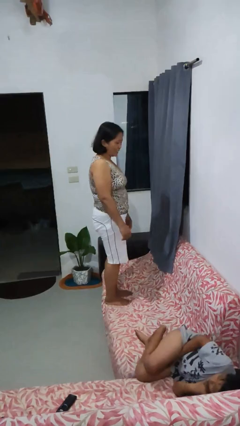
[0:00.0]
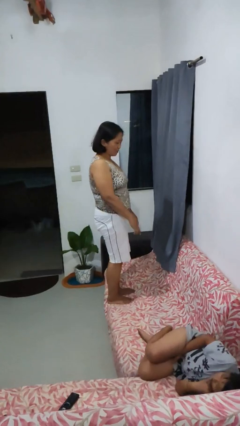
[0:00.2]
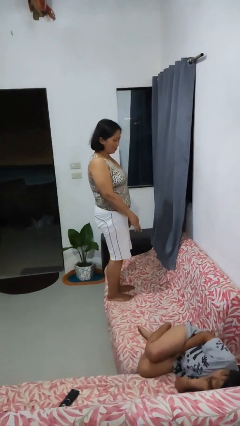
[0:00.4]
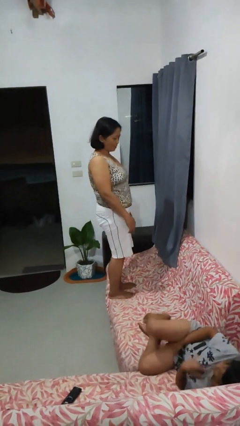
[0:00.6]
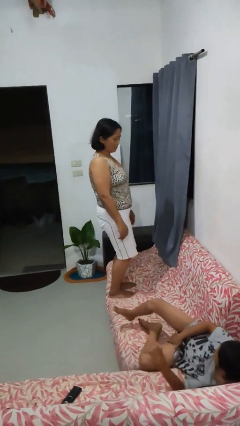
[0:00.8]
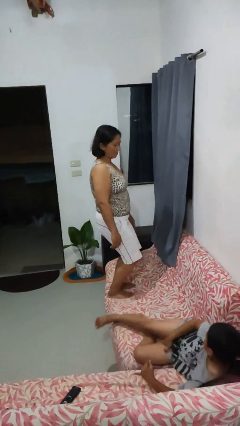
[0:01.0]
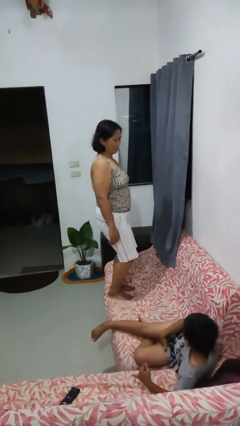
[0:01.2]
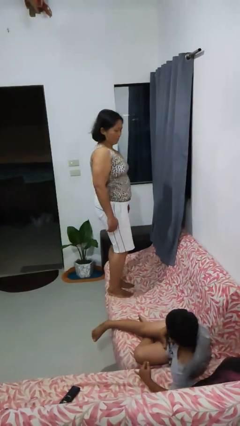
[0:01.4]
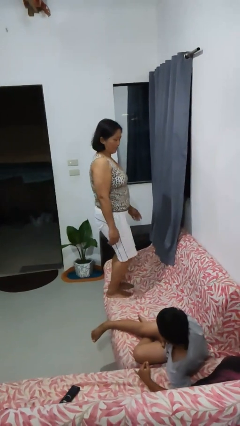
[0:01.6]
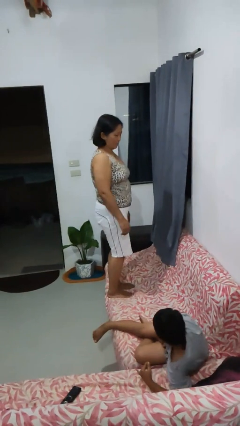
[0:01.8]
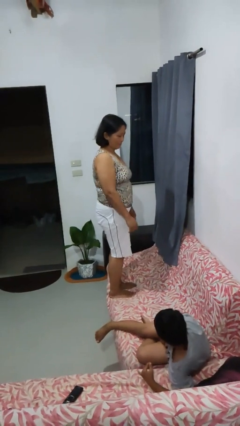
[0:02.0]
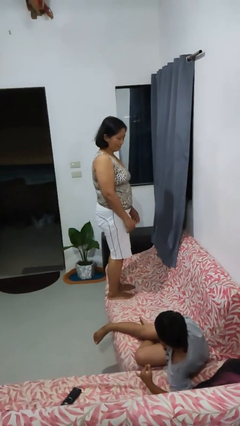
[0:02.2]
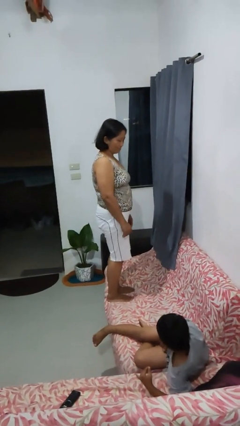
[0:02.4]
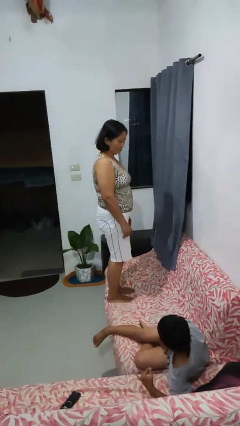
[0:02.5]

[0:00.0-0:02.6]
person jumps on couch

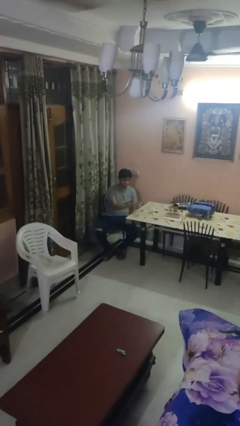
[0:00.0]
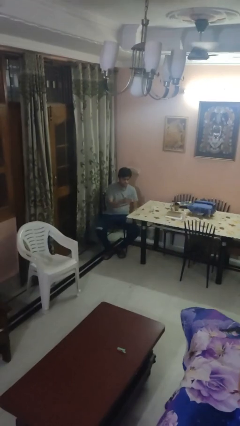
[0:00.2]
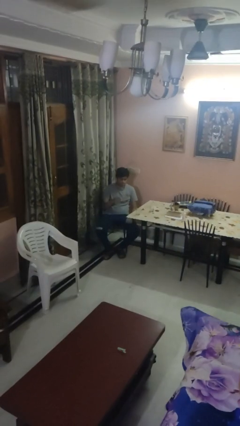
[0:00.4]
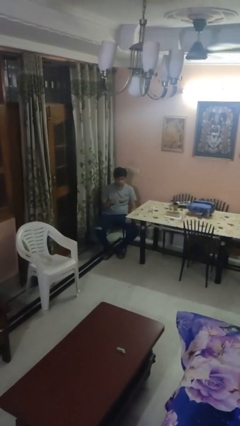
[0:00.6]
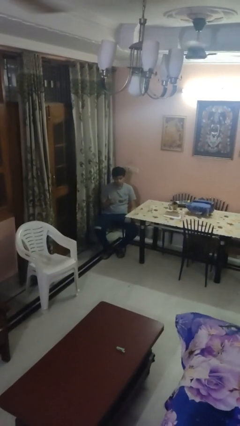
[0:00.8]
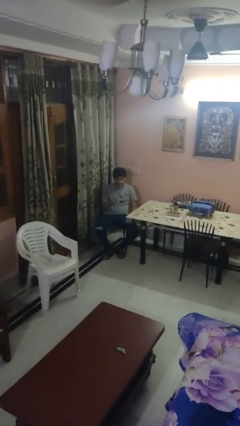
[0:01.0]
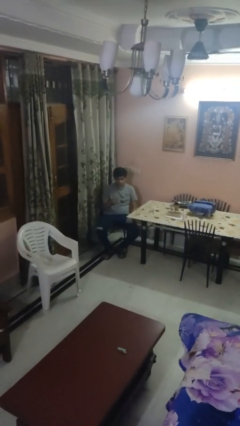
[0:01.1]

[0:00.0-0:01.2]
person picks up object from table

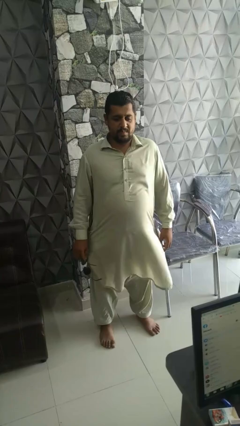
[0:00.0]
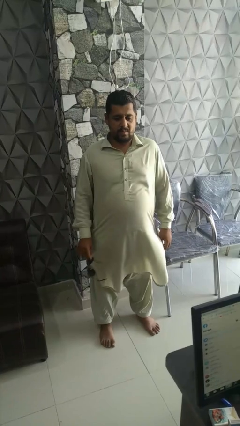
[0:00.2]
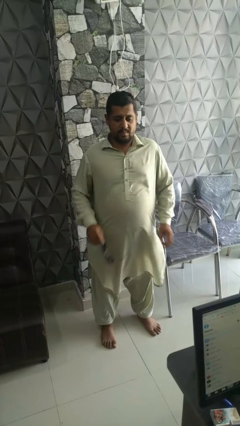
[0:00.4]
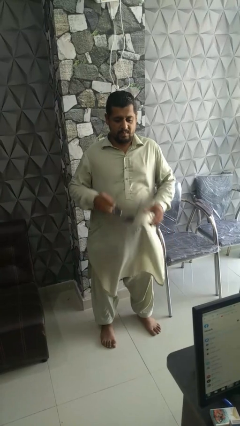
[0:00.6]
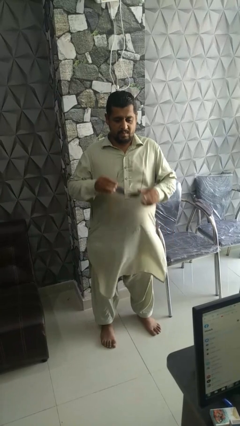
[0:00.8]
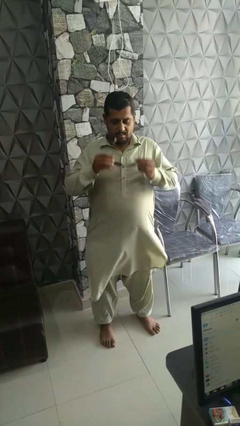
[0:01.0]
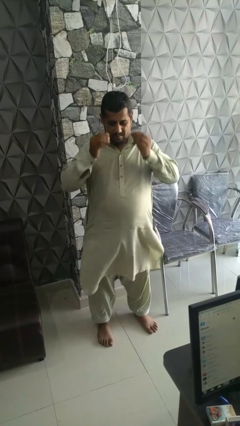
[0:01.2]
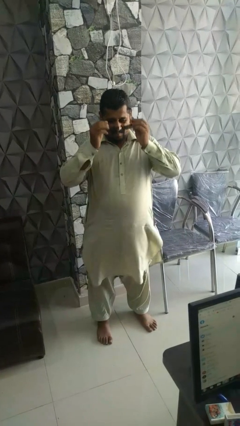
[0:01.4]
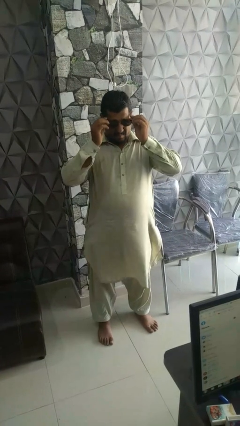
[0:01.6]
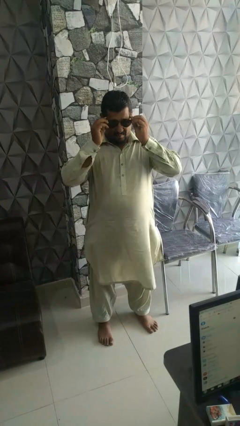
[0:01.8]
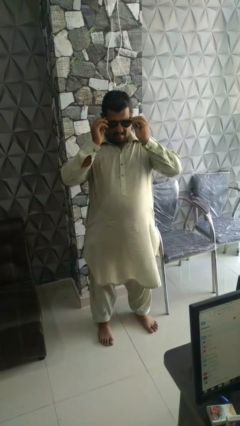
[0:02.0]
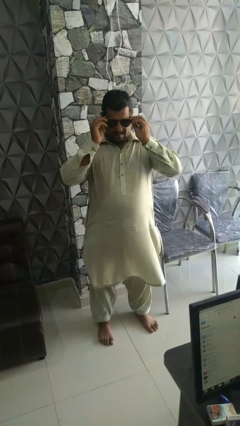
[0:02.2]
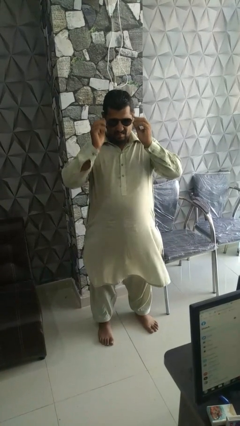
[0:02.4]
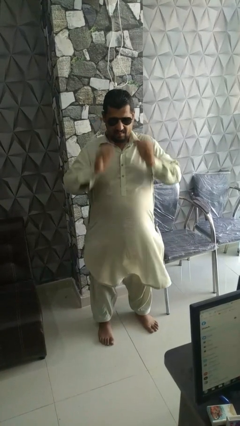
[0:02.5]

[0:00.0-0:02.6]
person puts on sunglasses

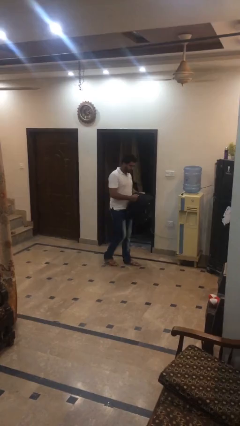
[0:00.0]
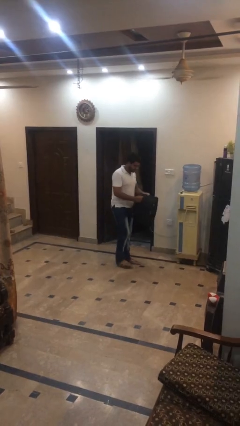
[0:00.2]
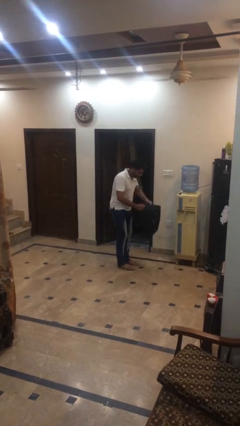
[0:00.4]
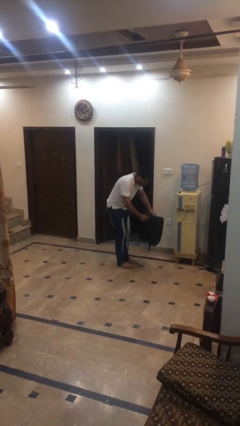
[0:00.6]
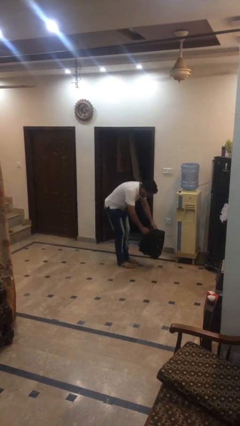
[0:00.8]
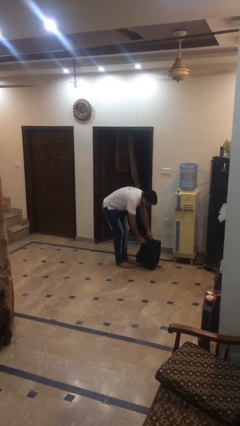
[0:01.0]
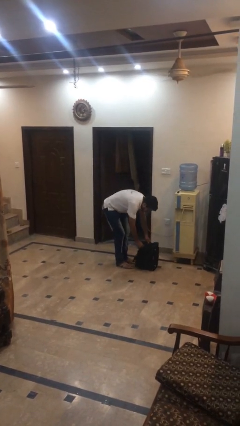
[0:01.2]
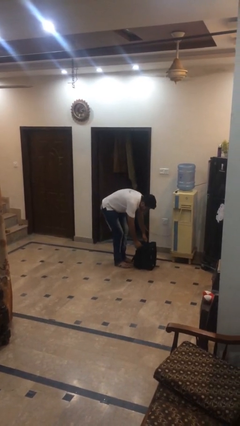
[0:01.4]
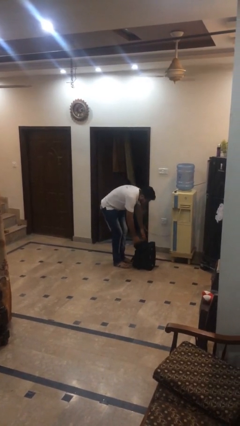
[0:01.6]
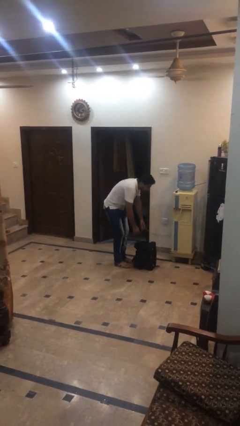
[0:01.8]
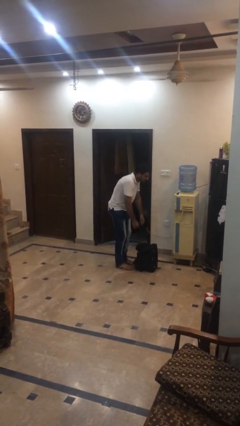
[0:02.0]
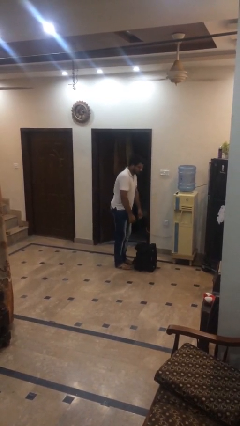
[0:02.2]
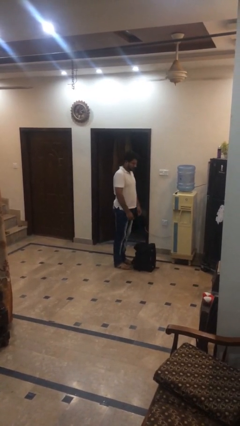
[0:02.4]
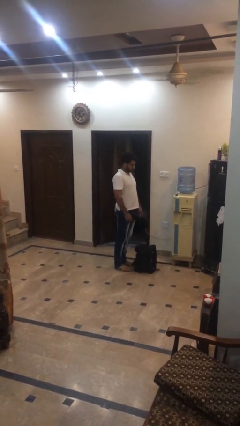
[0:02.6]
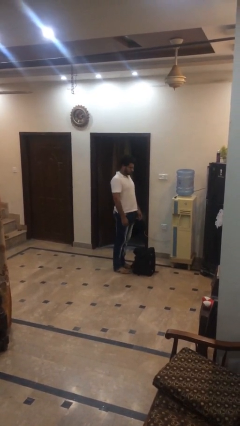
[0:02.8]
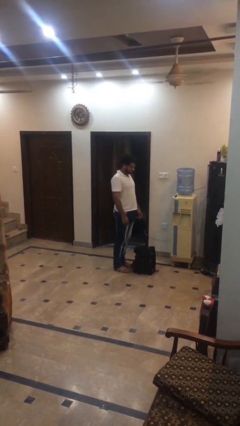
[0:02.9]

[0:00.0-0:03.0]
person puts down object on floor

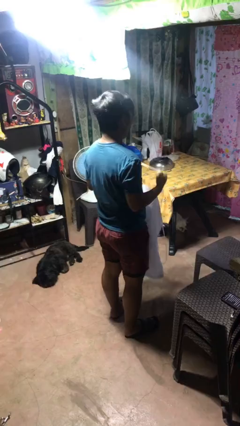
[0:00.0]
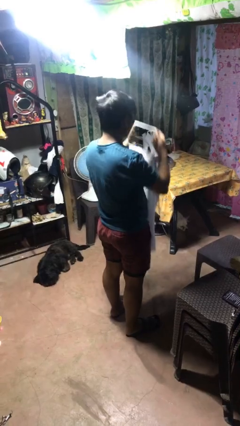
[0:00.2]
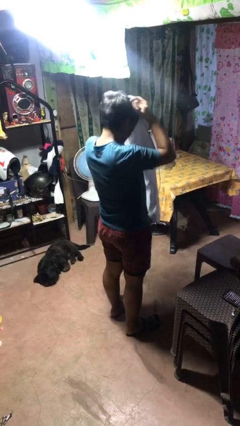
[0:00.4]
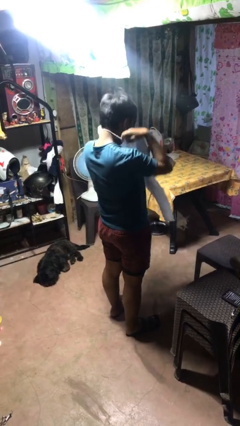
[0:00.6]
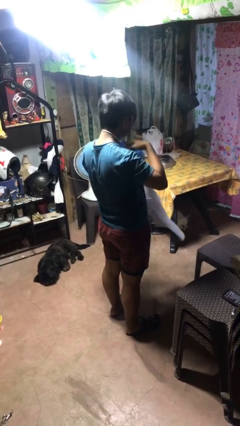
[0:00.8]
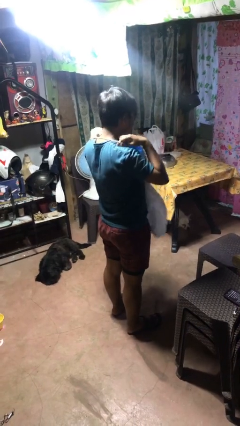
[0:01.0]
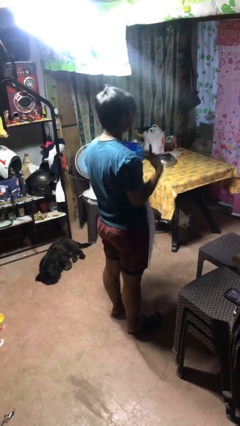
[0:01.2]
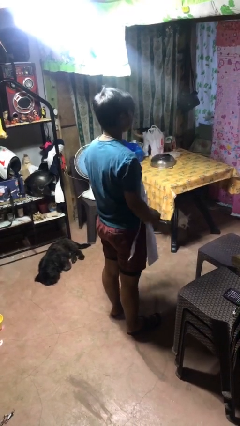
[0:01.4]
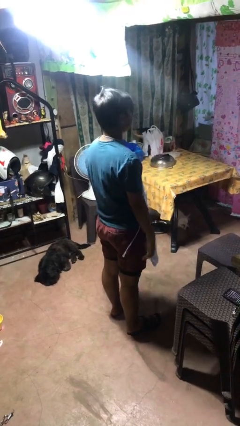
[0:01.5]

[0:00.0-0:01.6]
person puts on apron

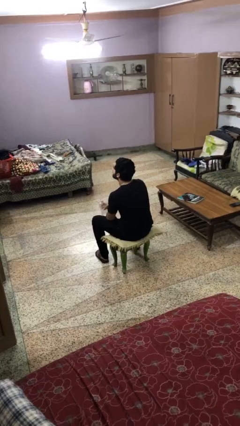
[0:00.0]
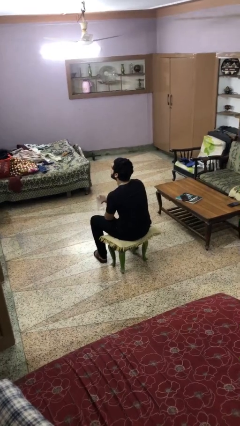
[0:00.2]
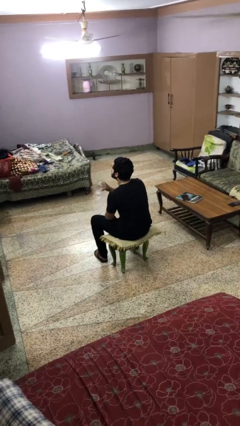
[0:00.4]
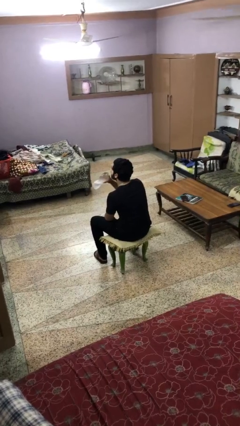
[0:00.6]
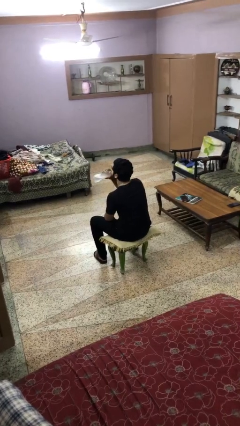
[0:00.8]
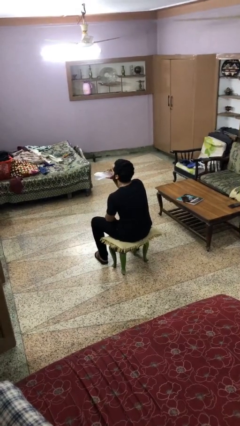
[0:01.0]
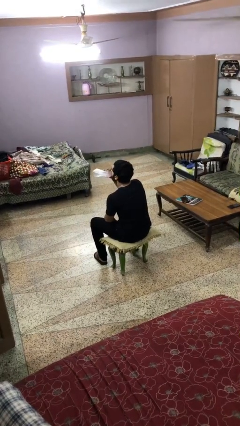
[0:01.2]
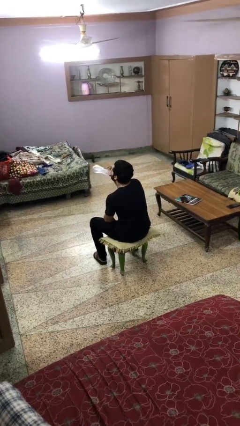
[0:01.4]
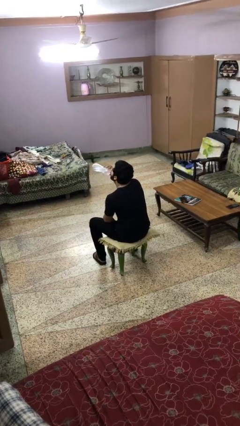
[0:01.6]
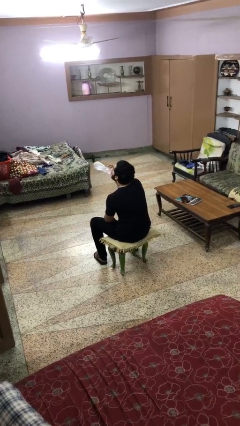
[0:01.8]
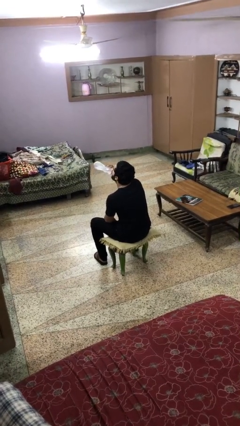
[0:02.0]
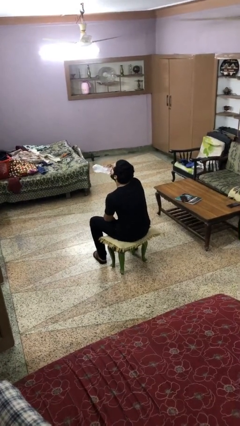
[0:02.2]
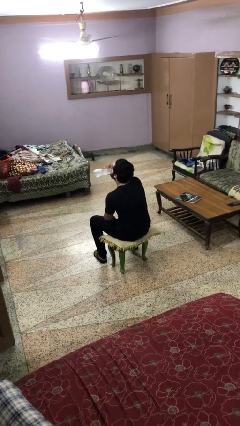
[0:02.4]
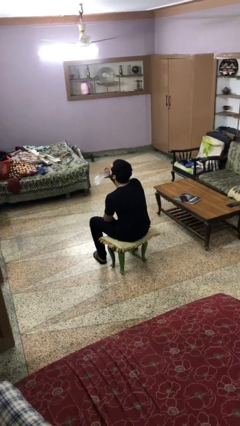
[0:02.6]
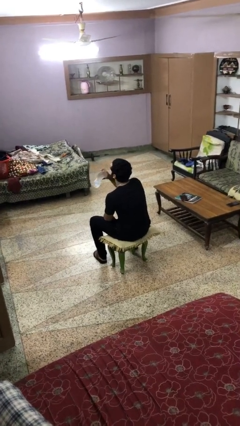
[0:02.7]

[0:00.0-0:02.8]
person drinks from bottle

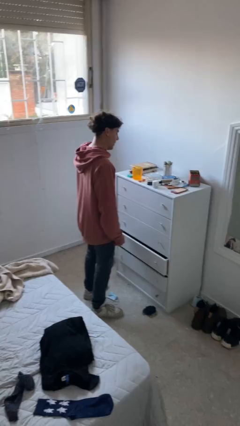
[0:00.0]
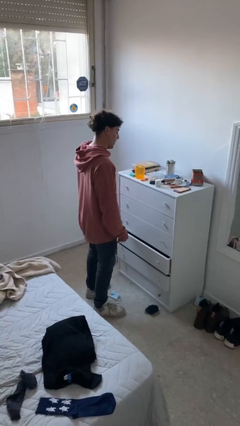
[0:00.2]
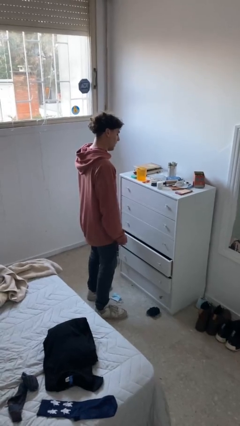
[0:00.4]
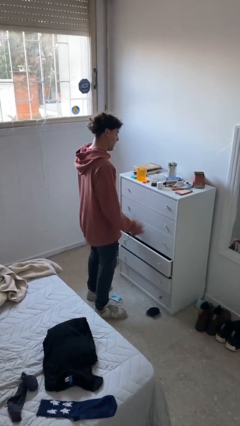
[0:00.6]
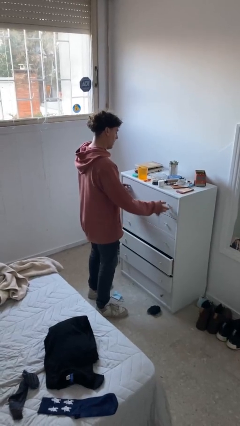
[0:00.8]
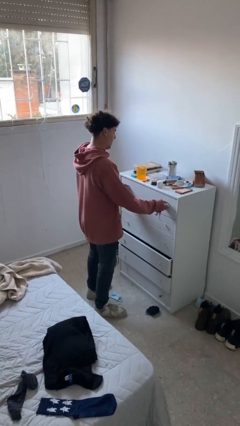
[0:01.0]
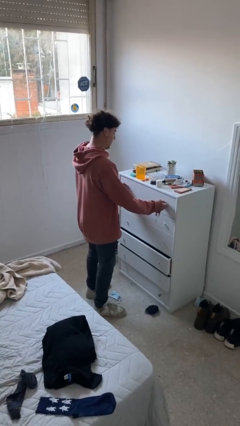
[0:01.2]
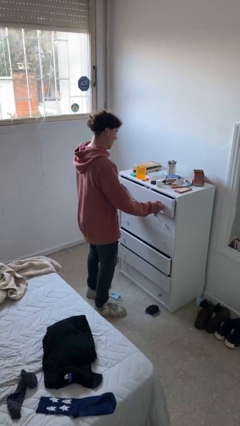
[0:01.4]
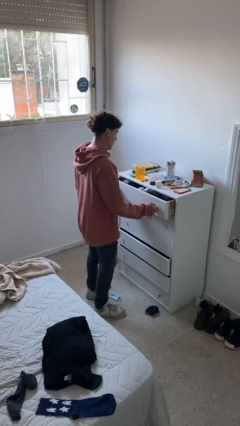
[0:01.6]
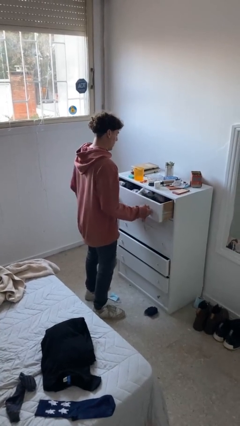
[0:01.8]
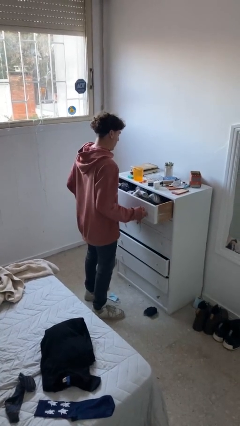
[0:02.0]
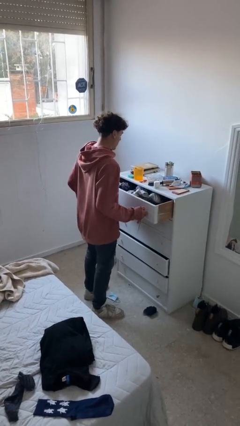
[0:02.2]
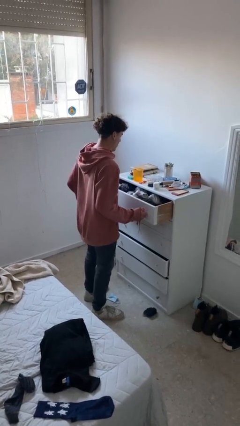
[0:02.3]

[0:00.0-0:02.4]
person opens dresser drawer

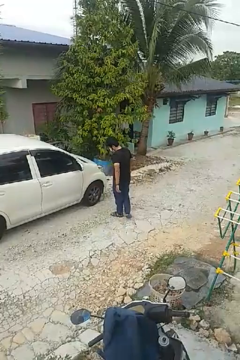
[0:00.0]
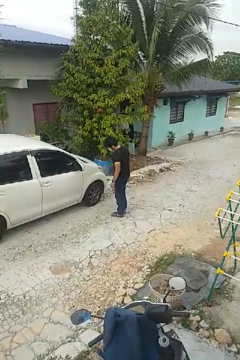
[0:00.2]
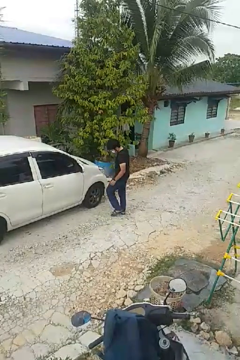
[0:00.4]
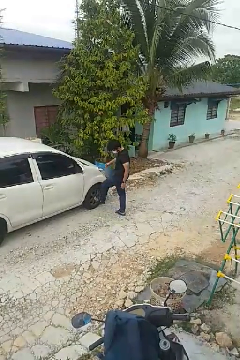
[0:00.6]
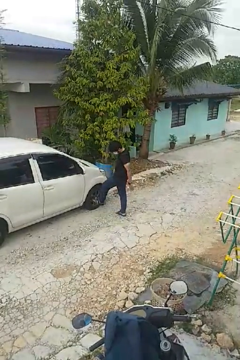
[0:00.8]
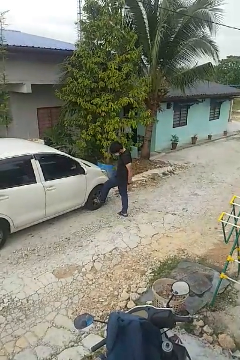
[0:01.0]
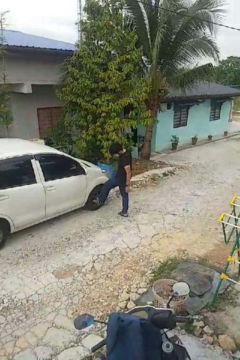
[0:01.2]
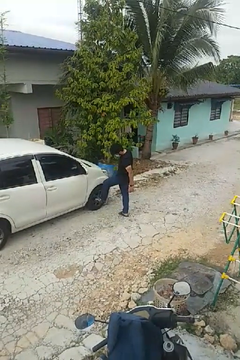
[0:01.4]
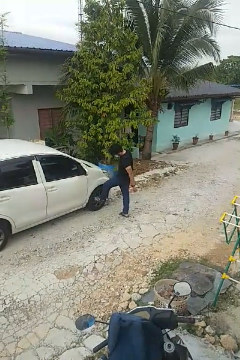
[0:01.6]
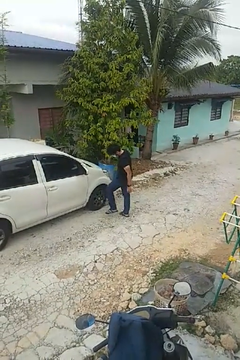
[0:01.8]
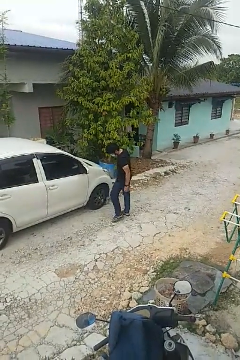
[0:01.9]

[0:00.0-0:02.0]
person kicks car tires
